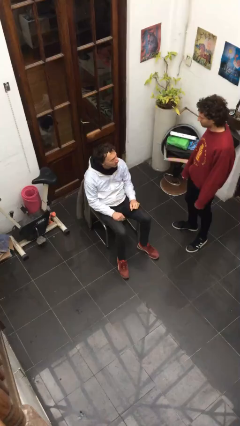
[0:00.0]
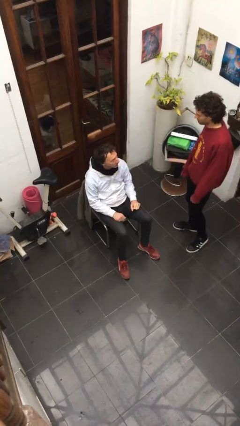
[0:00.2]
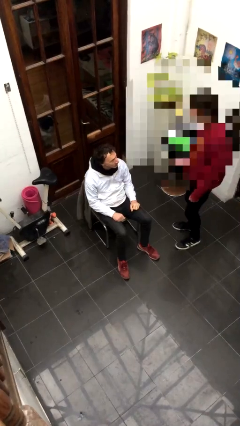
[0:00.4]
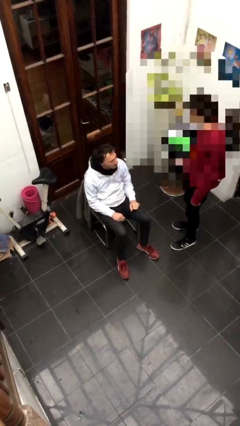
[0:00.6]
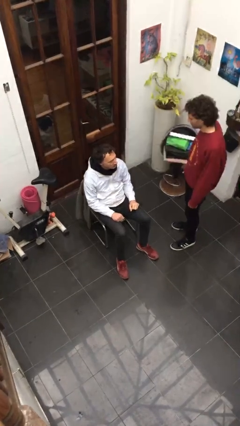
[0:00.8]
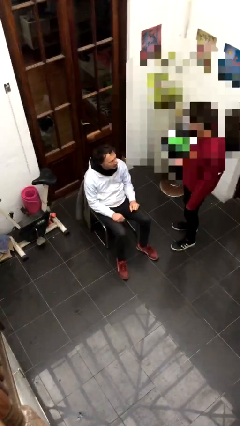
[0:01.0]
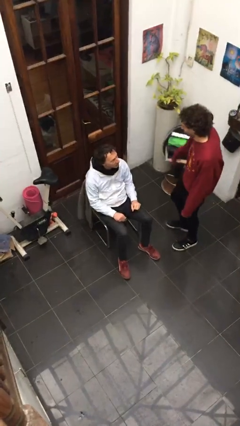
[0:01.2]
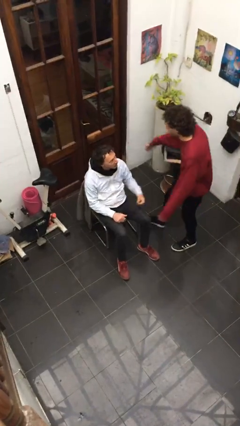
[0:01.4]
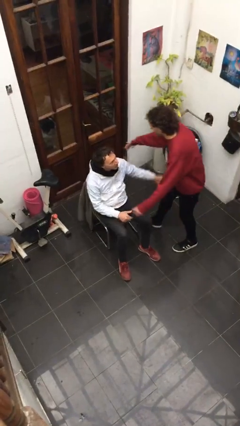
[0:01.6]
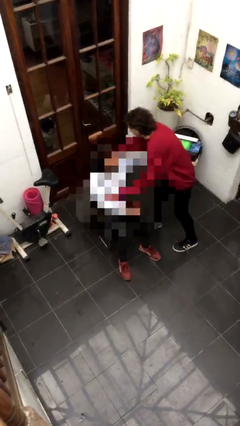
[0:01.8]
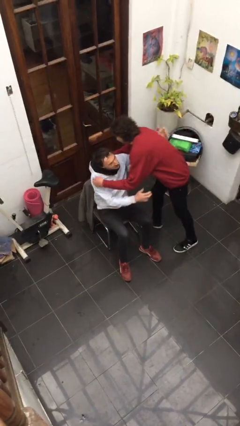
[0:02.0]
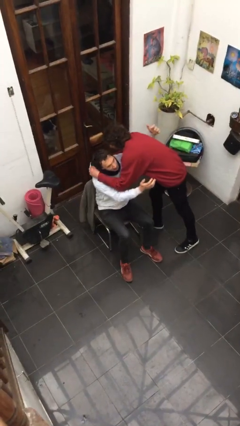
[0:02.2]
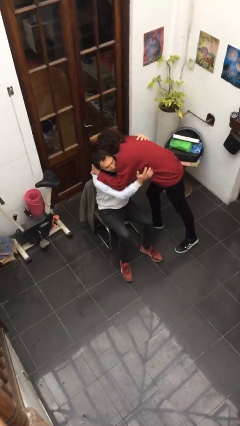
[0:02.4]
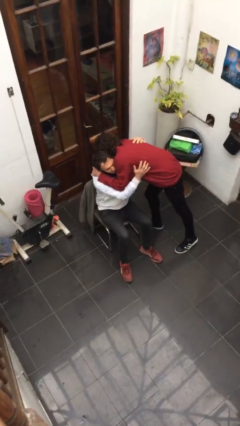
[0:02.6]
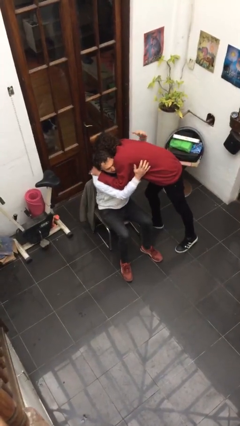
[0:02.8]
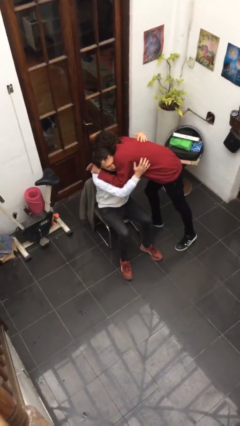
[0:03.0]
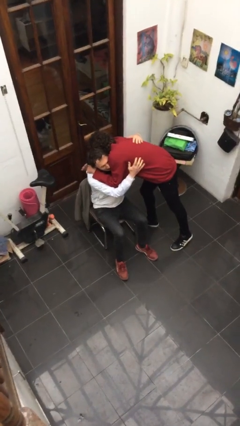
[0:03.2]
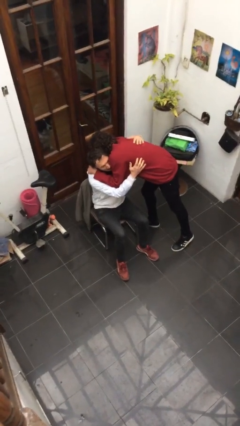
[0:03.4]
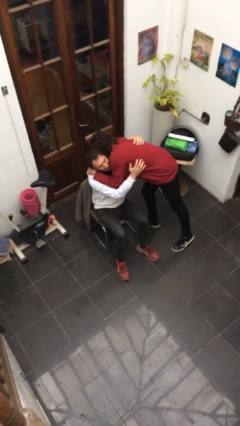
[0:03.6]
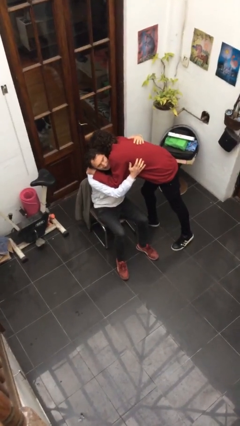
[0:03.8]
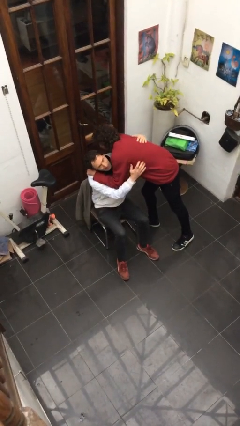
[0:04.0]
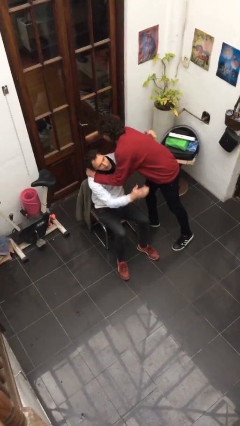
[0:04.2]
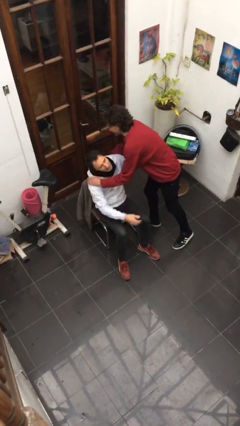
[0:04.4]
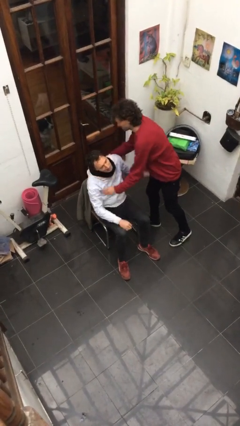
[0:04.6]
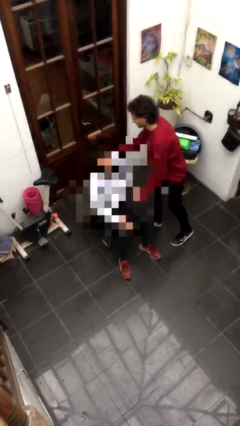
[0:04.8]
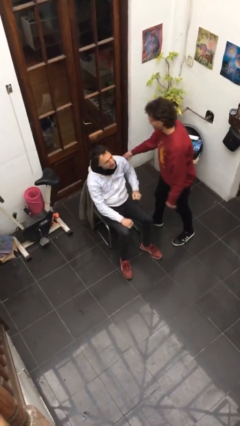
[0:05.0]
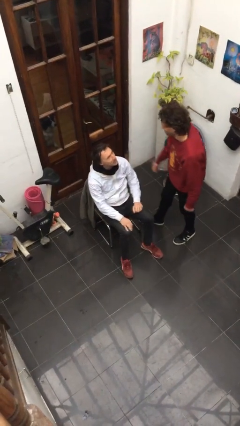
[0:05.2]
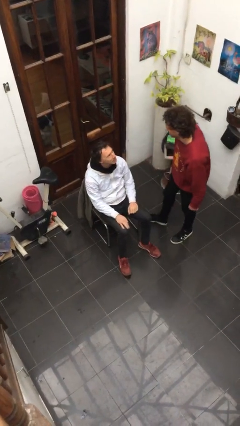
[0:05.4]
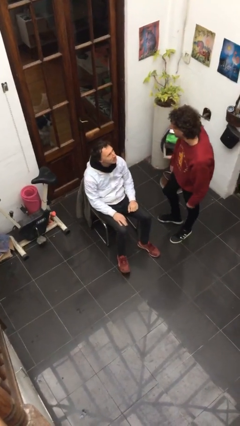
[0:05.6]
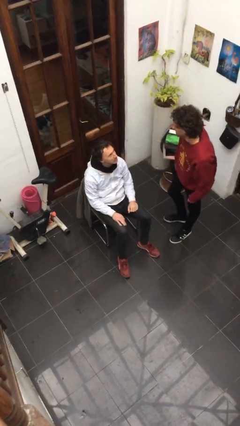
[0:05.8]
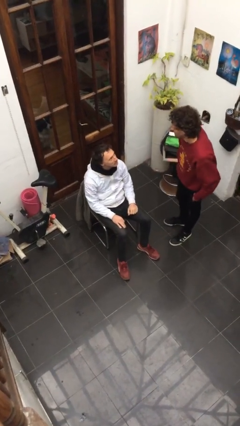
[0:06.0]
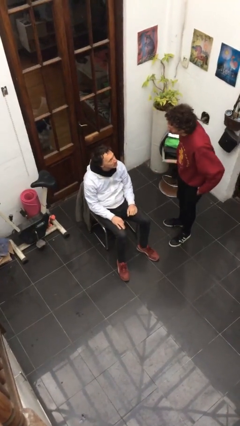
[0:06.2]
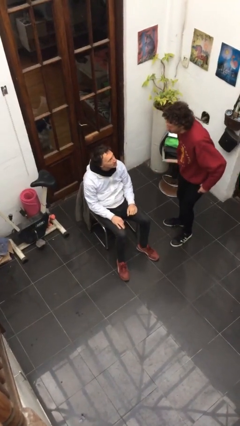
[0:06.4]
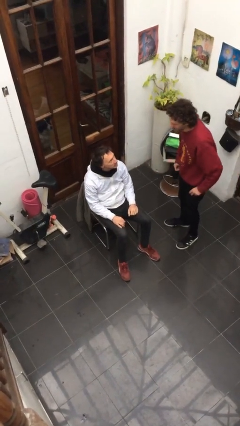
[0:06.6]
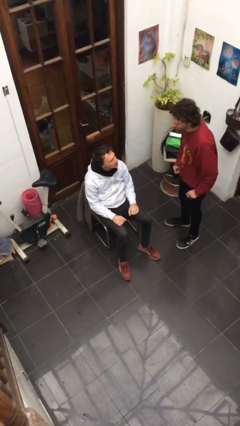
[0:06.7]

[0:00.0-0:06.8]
person embraces person

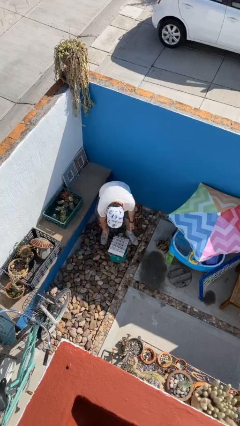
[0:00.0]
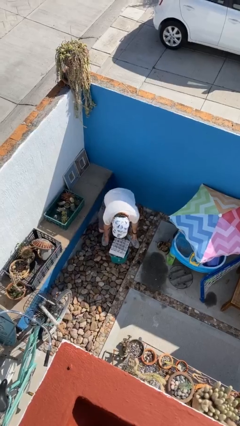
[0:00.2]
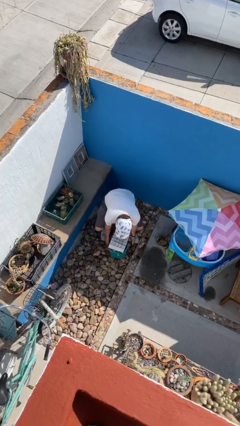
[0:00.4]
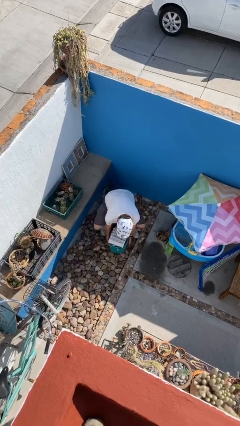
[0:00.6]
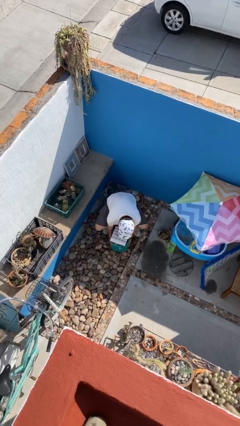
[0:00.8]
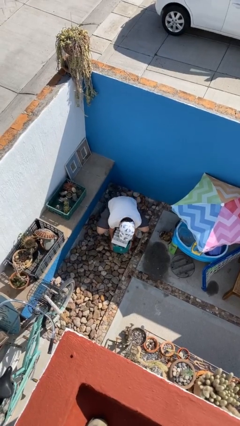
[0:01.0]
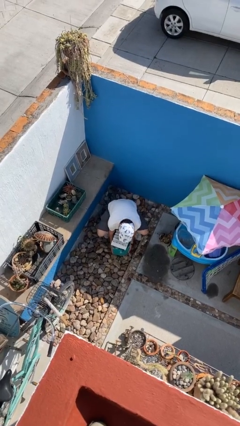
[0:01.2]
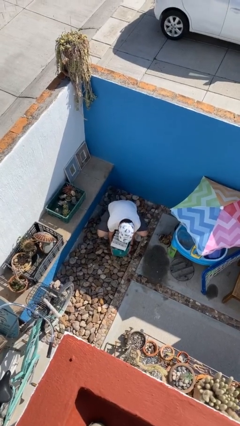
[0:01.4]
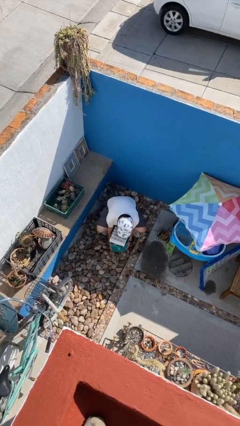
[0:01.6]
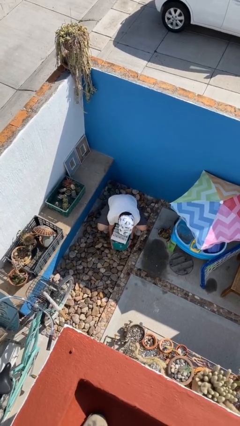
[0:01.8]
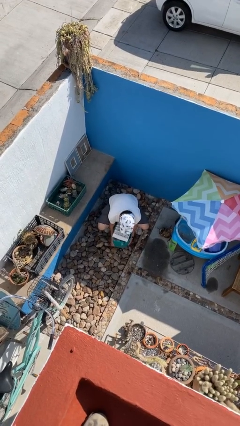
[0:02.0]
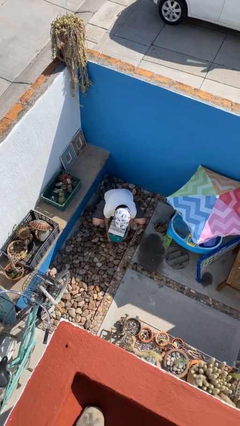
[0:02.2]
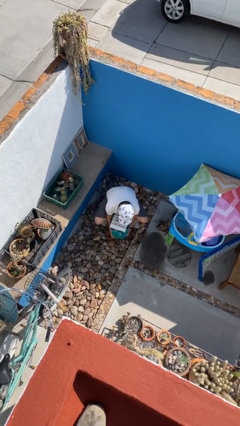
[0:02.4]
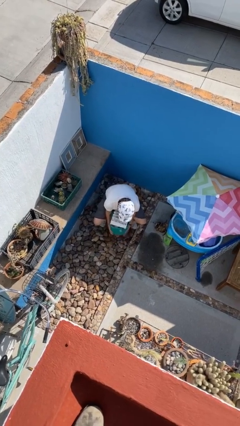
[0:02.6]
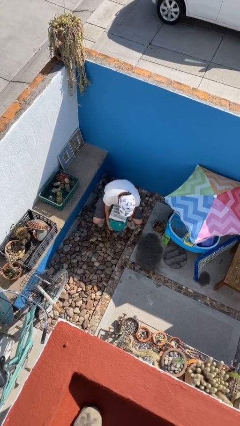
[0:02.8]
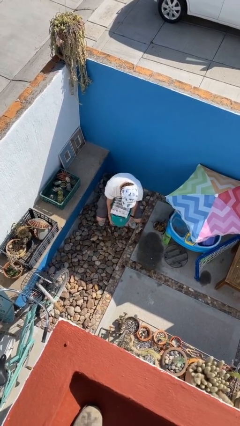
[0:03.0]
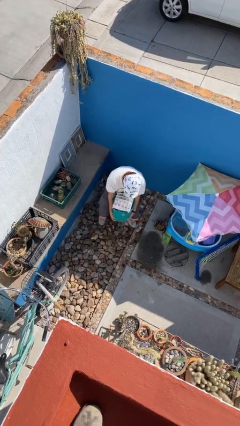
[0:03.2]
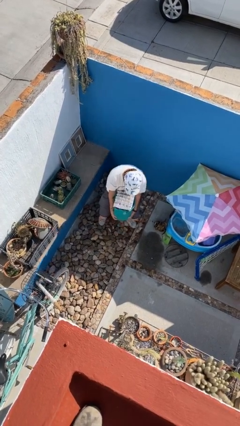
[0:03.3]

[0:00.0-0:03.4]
person picks up object from floor

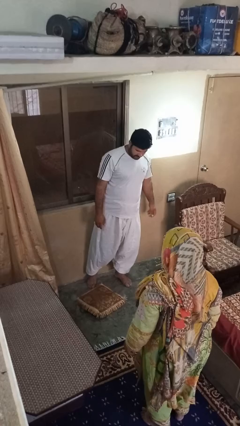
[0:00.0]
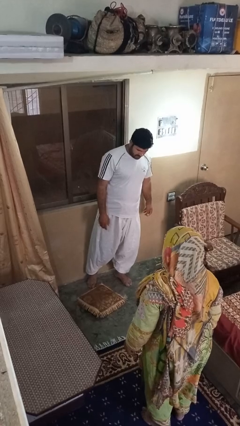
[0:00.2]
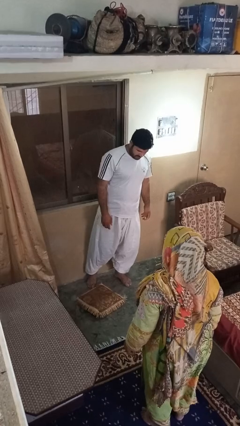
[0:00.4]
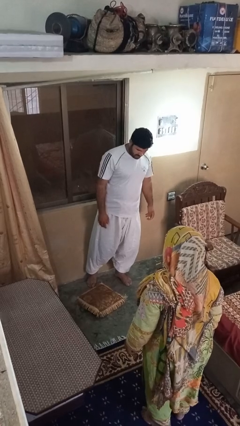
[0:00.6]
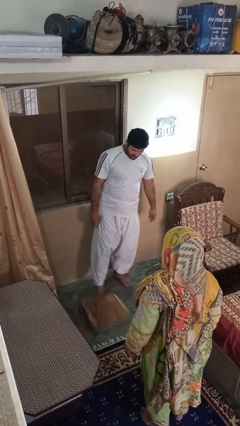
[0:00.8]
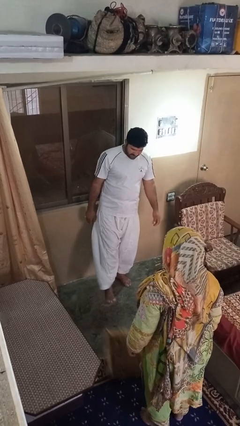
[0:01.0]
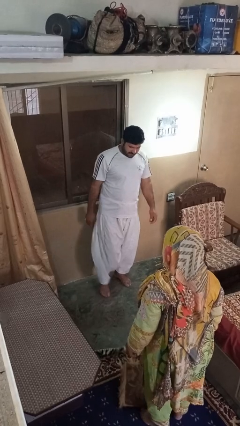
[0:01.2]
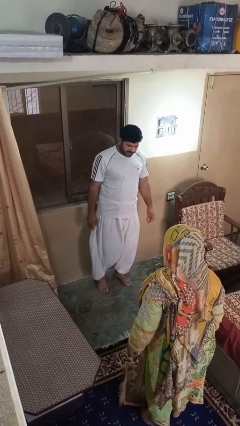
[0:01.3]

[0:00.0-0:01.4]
person kicks object to person

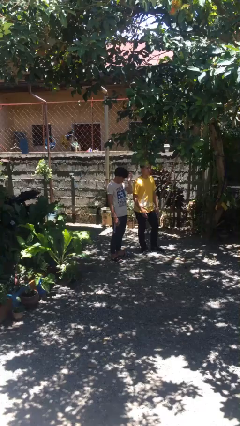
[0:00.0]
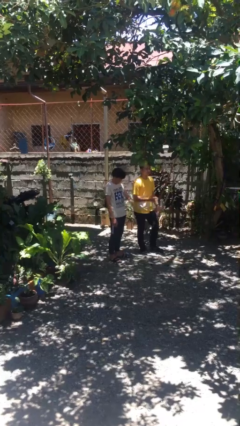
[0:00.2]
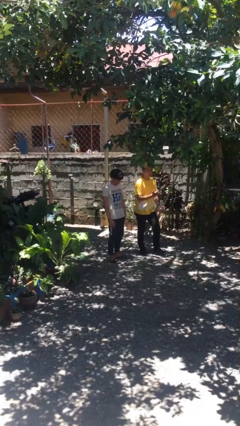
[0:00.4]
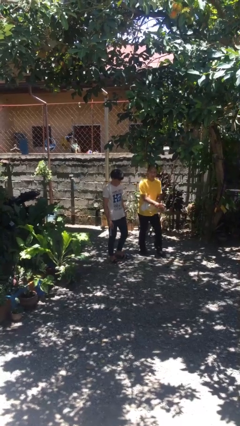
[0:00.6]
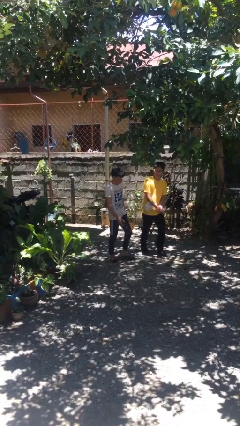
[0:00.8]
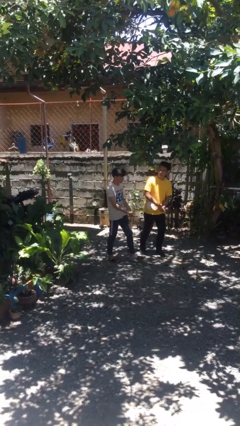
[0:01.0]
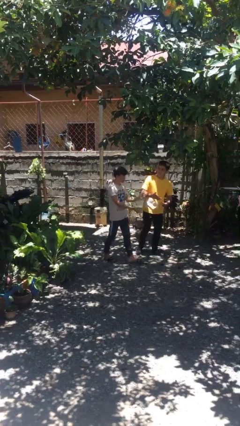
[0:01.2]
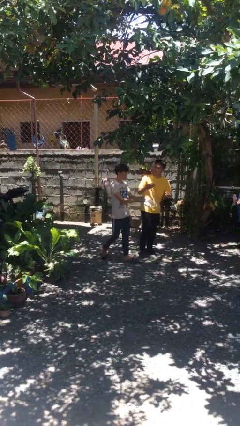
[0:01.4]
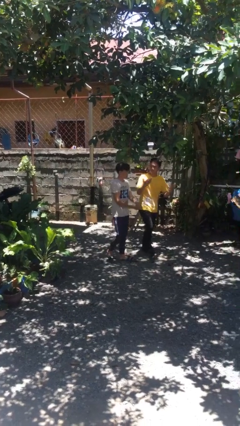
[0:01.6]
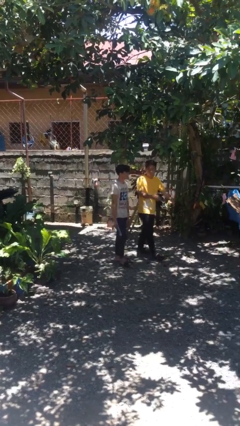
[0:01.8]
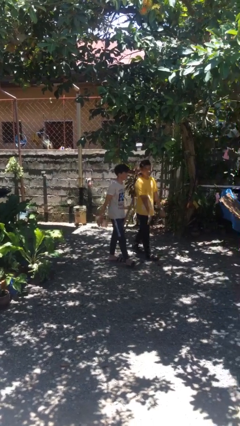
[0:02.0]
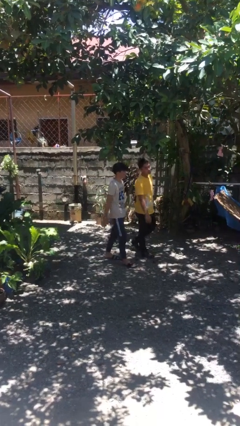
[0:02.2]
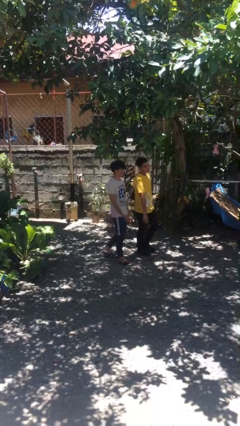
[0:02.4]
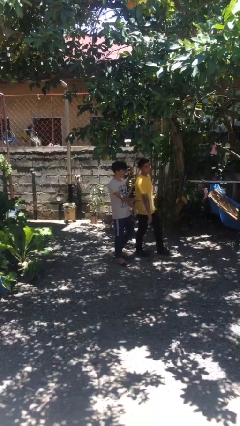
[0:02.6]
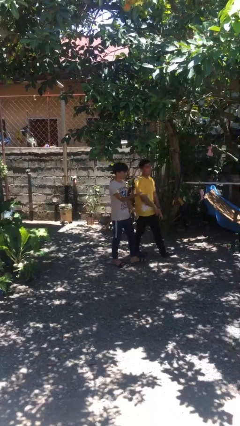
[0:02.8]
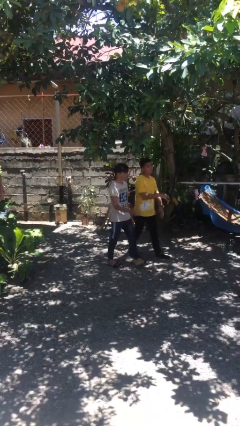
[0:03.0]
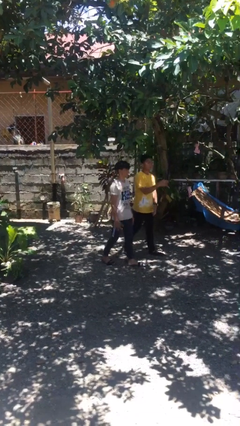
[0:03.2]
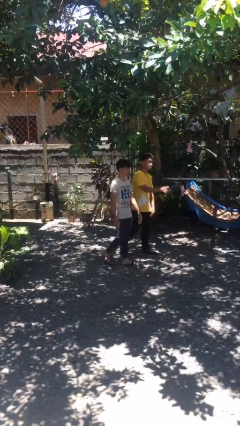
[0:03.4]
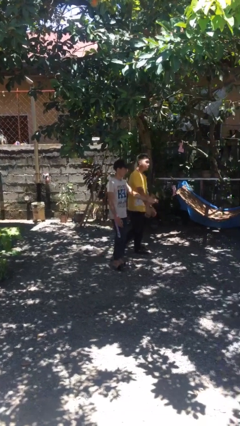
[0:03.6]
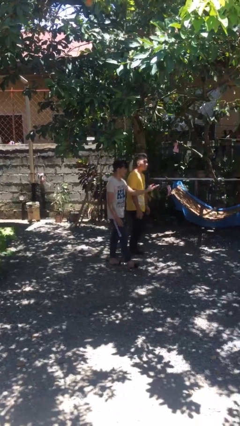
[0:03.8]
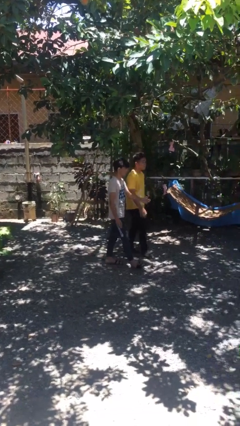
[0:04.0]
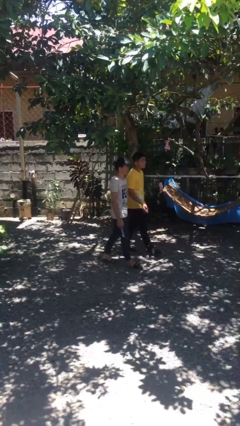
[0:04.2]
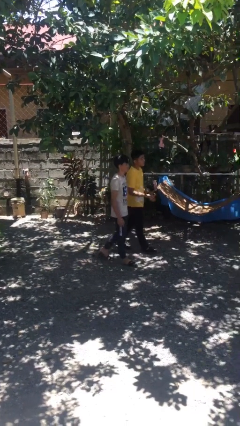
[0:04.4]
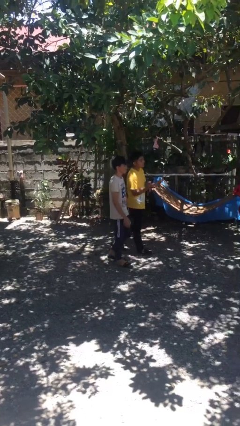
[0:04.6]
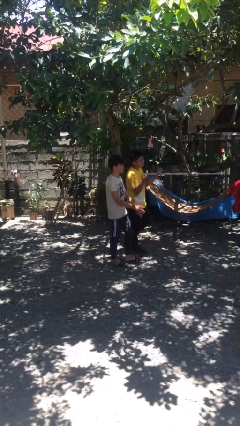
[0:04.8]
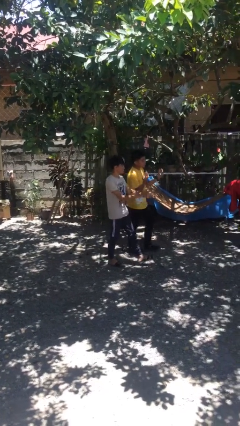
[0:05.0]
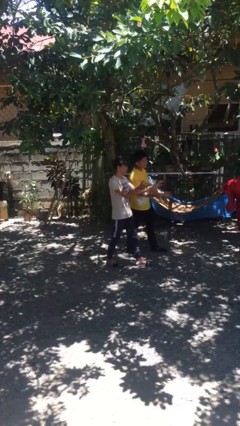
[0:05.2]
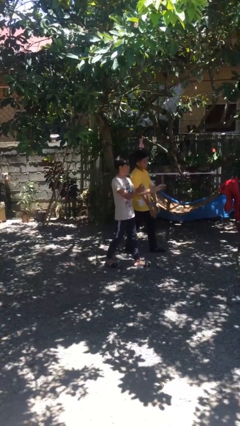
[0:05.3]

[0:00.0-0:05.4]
person talks to person

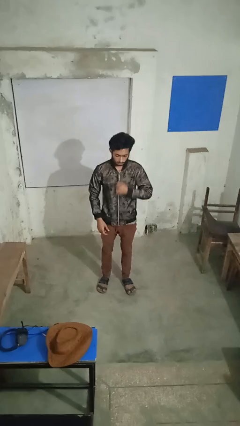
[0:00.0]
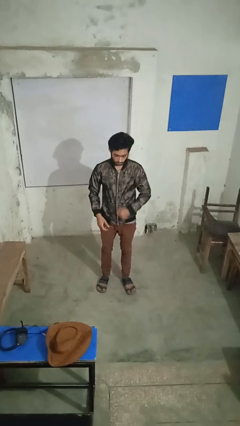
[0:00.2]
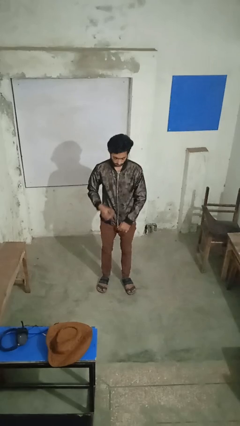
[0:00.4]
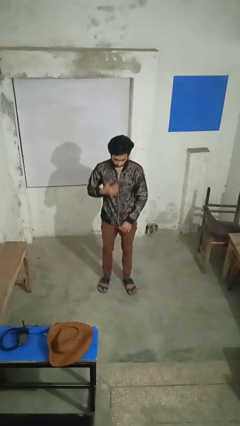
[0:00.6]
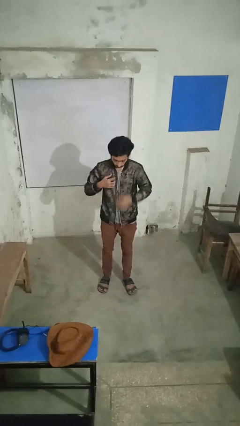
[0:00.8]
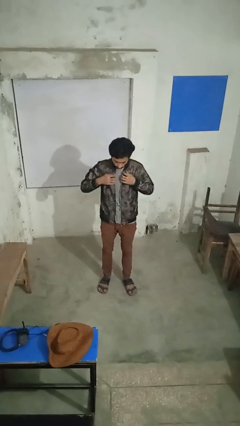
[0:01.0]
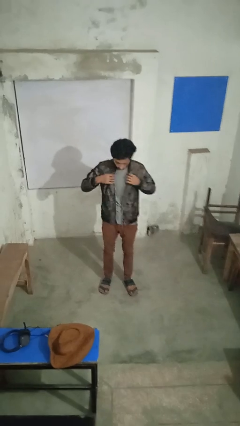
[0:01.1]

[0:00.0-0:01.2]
person unzips jacket
